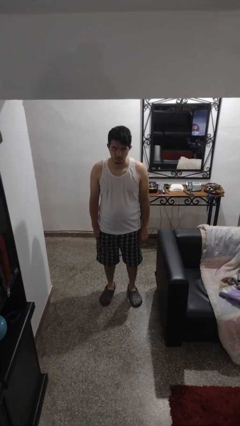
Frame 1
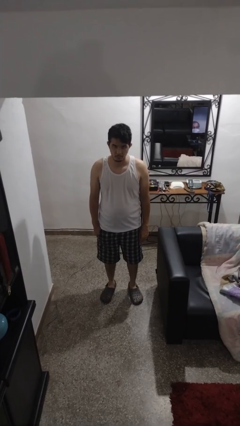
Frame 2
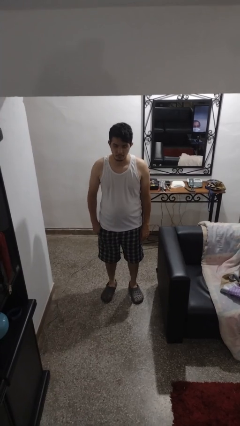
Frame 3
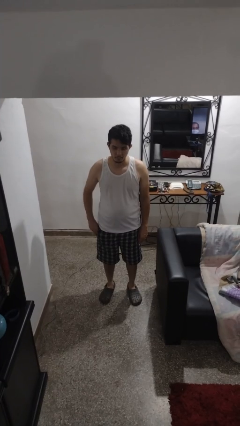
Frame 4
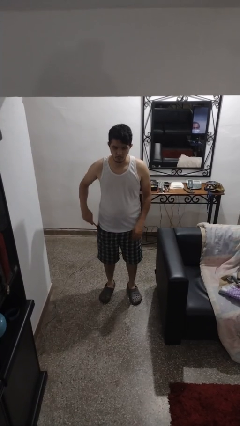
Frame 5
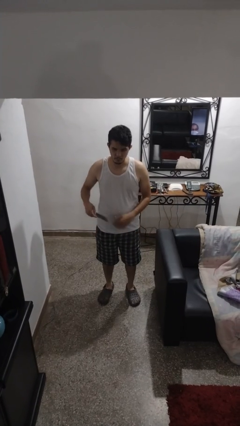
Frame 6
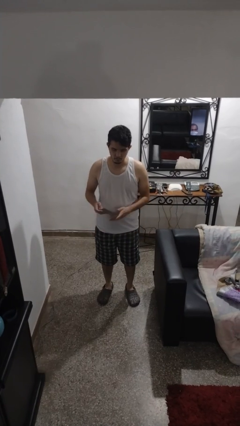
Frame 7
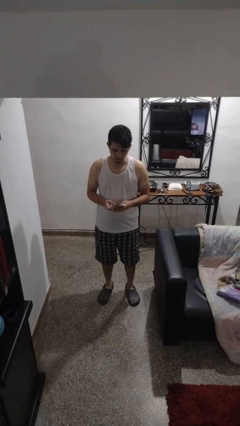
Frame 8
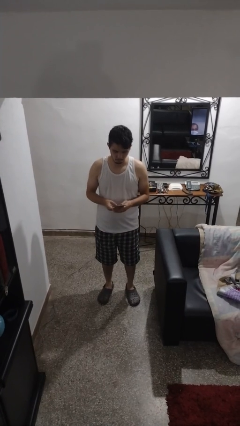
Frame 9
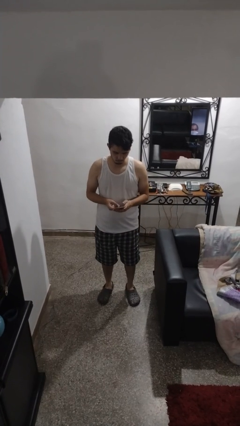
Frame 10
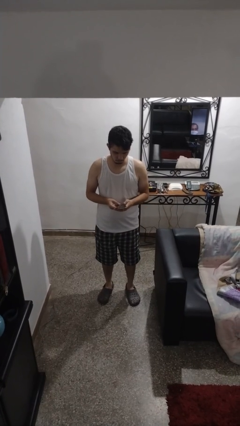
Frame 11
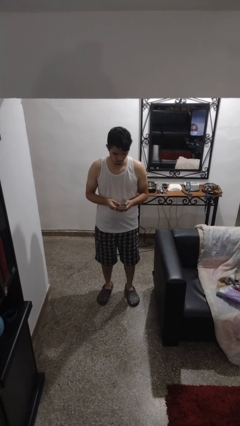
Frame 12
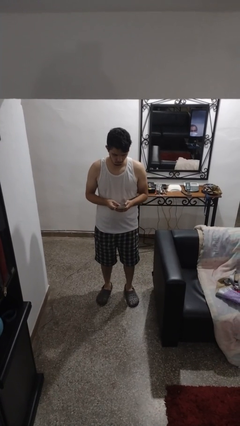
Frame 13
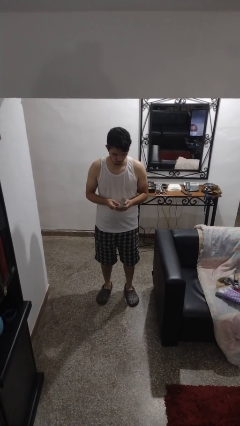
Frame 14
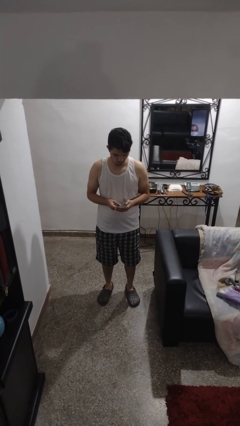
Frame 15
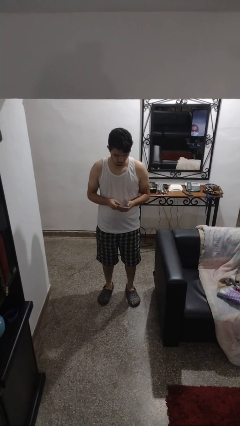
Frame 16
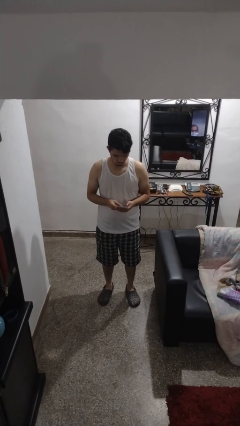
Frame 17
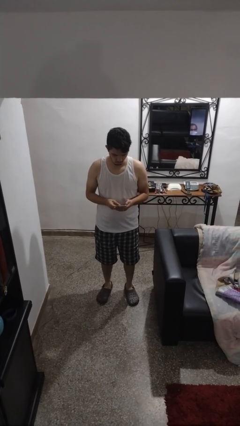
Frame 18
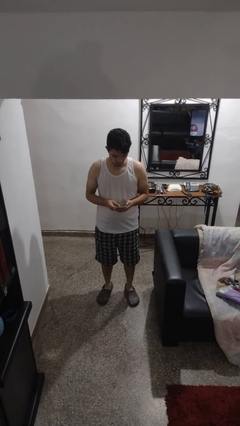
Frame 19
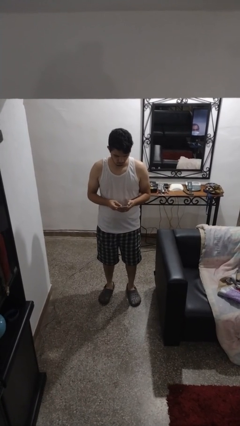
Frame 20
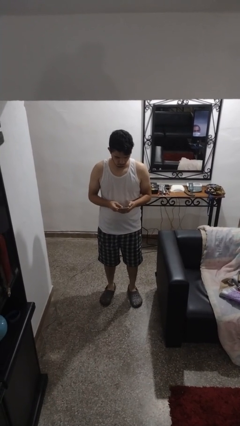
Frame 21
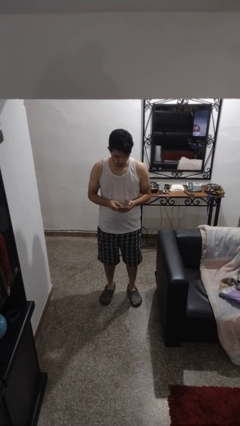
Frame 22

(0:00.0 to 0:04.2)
person takes phone from pocket

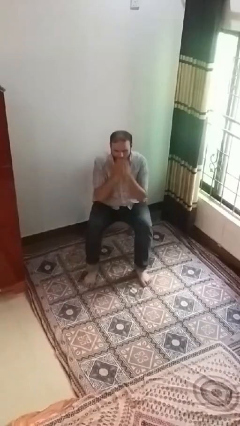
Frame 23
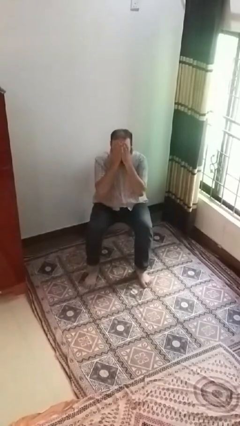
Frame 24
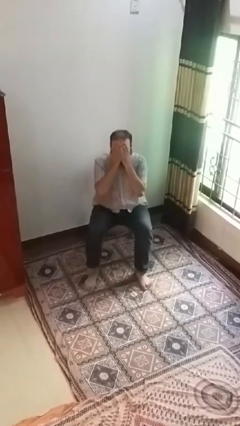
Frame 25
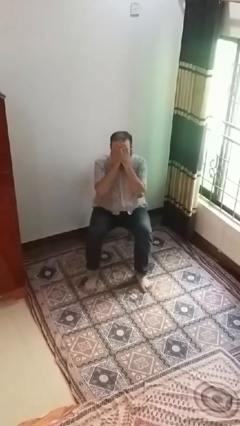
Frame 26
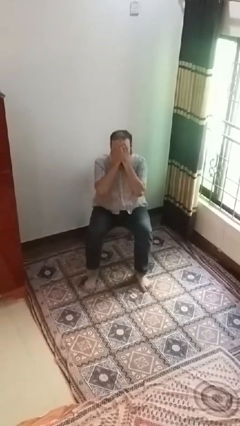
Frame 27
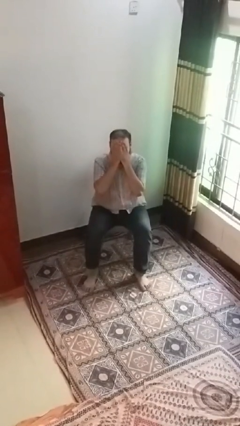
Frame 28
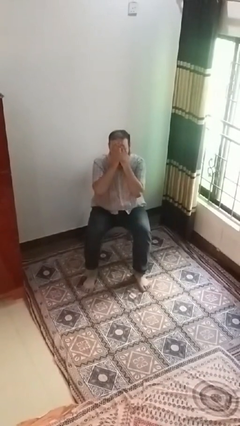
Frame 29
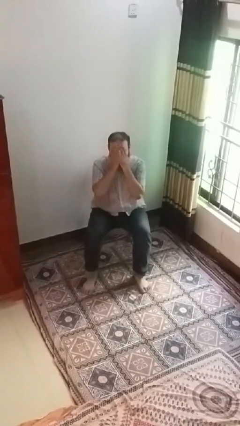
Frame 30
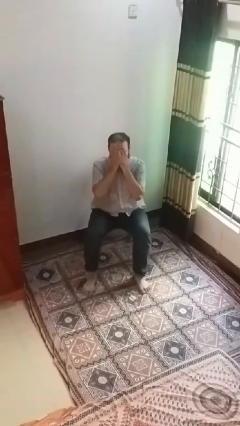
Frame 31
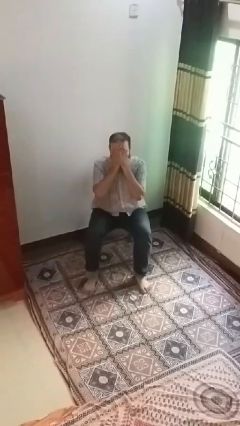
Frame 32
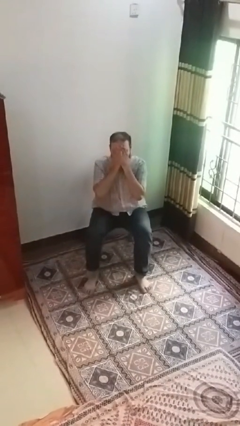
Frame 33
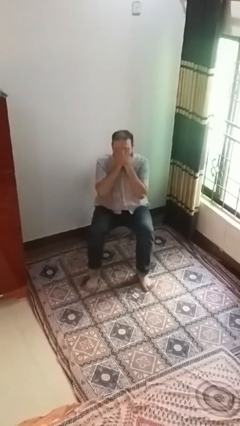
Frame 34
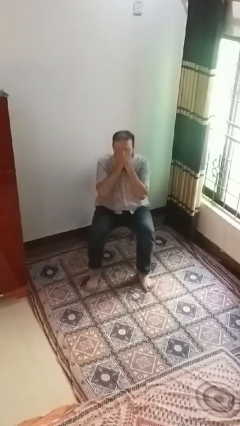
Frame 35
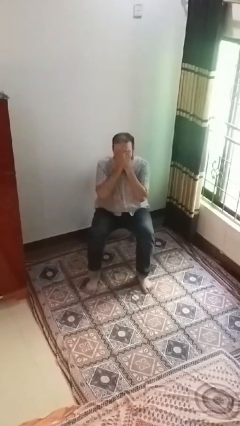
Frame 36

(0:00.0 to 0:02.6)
person covers face with hands

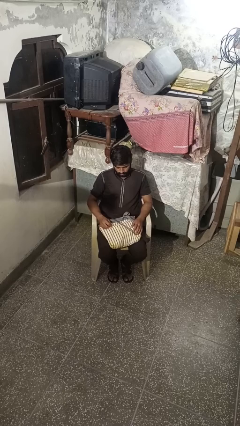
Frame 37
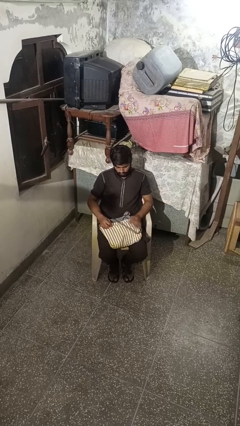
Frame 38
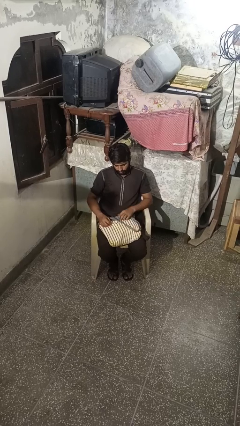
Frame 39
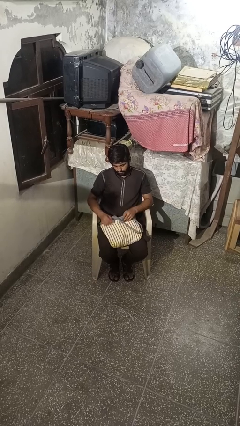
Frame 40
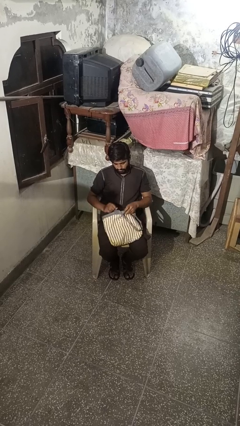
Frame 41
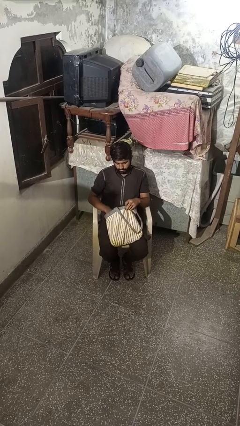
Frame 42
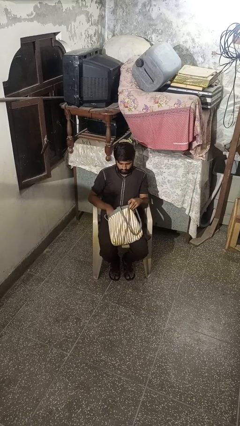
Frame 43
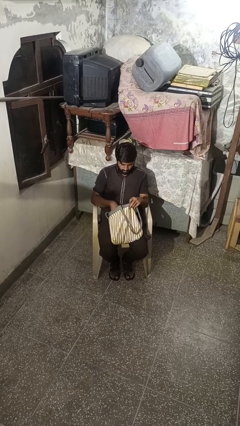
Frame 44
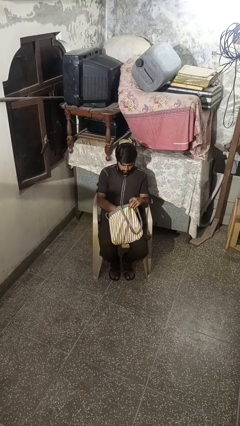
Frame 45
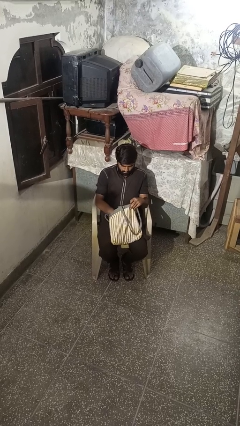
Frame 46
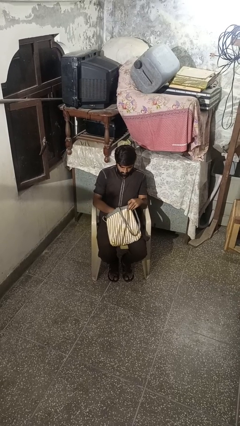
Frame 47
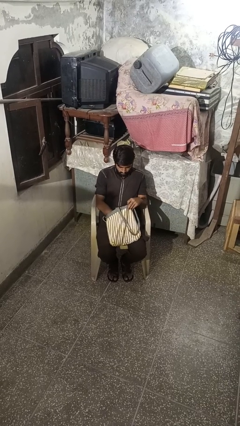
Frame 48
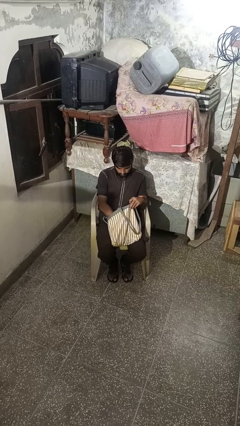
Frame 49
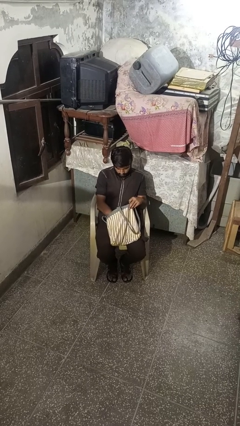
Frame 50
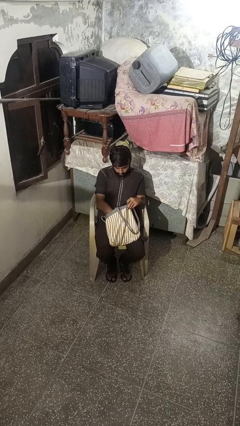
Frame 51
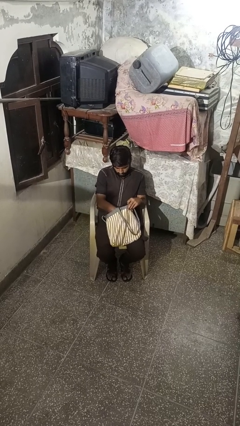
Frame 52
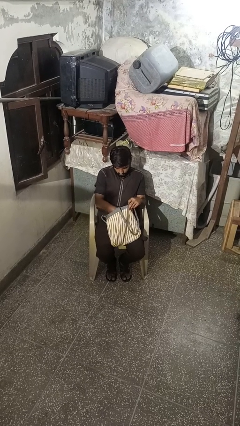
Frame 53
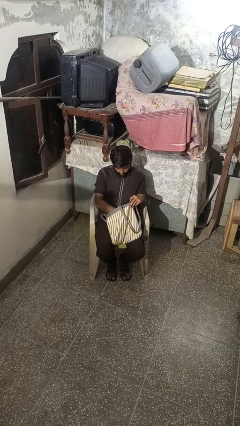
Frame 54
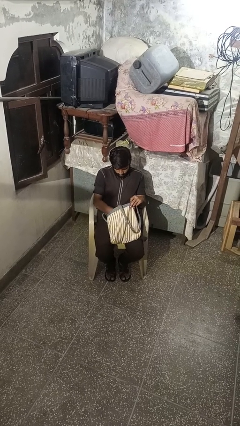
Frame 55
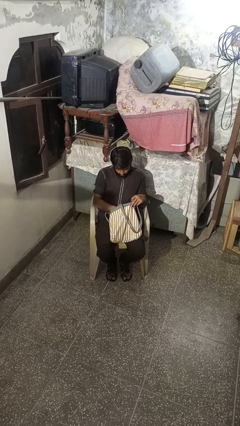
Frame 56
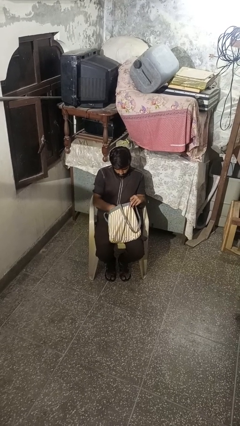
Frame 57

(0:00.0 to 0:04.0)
person searches in backpack

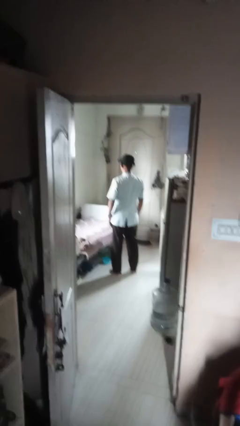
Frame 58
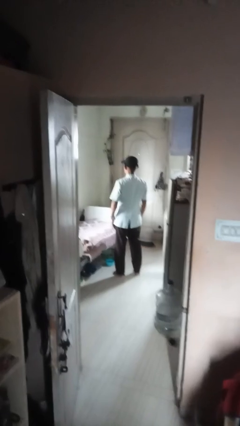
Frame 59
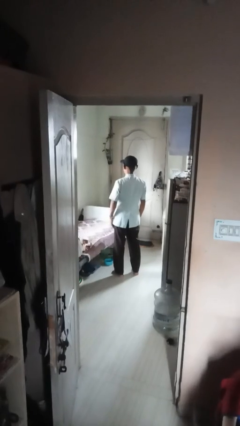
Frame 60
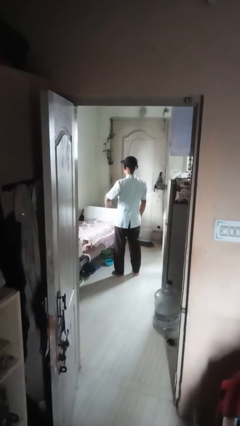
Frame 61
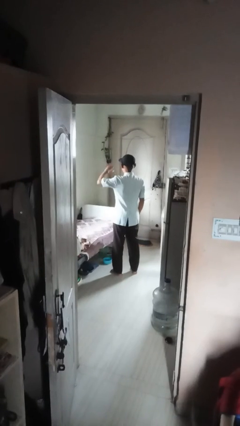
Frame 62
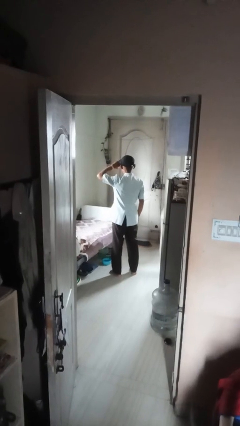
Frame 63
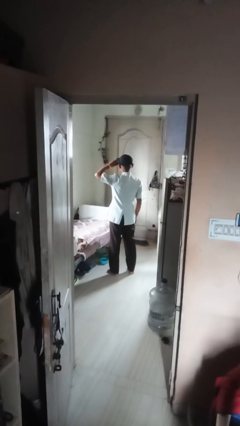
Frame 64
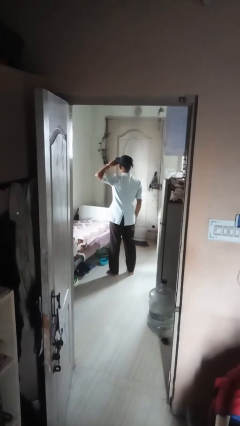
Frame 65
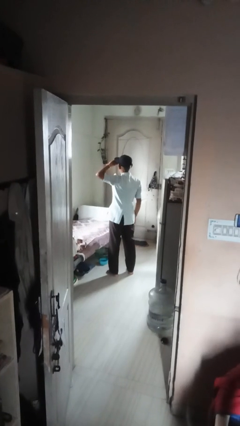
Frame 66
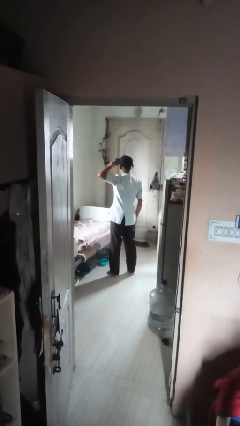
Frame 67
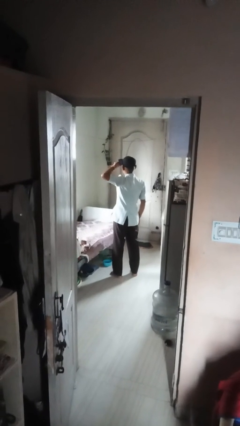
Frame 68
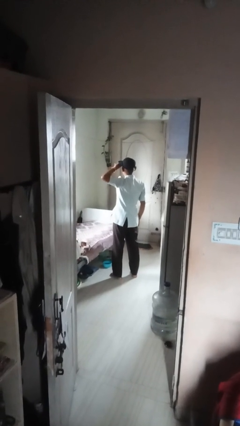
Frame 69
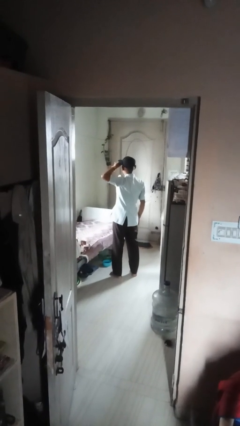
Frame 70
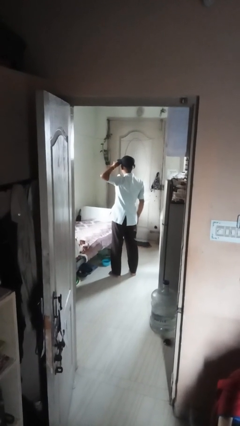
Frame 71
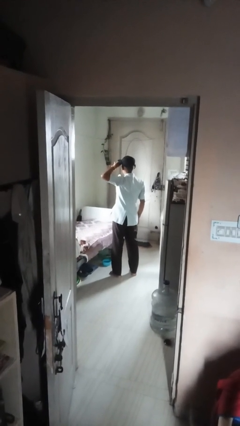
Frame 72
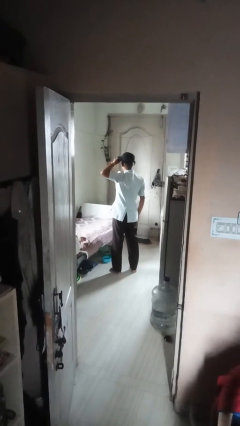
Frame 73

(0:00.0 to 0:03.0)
person salutes

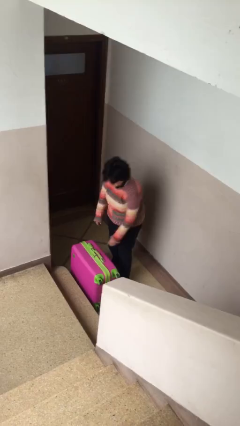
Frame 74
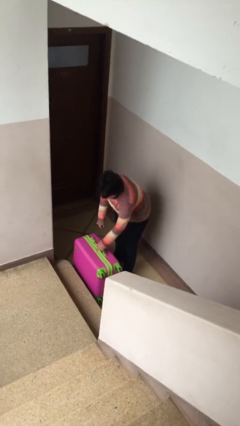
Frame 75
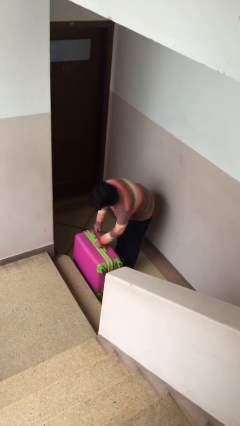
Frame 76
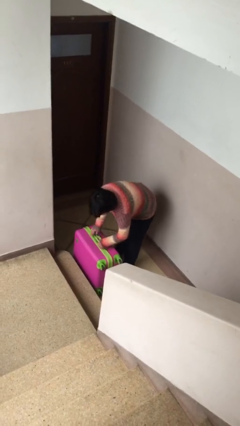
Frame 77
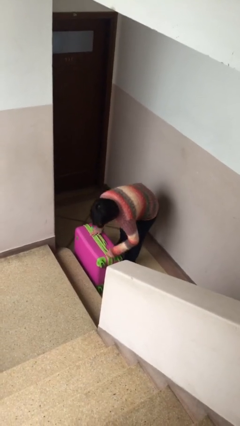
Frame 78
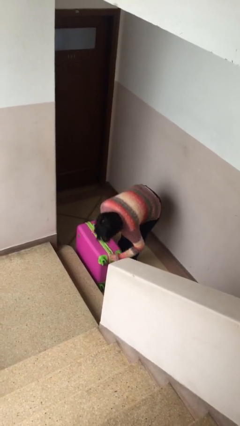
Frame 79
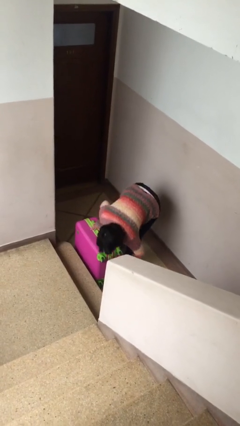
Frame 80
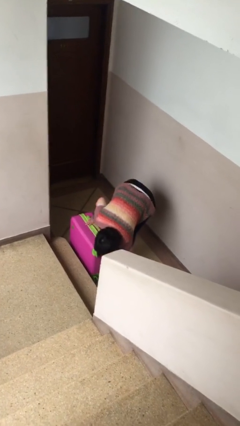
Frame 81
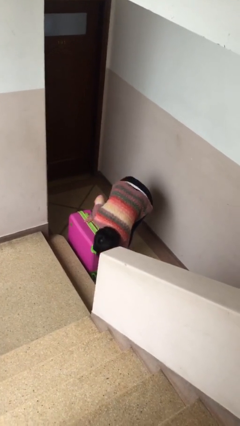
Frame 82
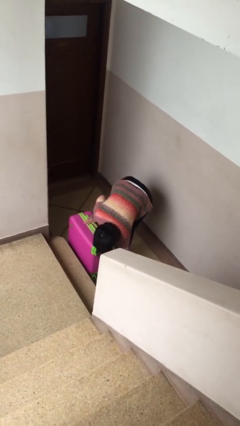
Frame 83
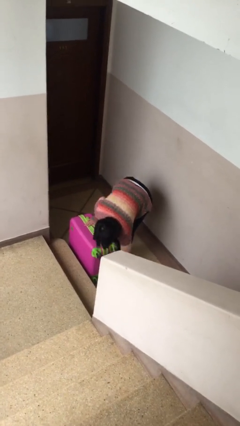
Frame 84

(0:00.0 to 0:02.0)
person opens suitcase

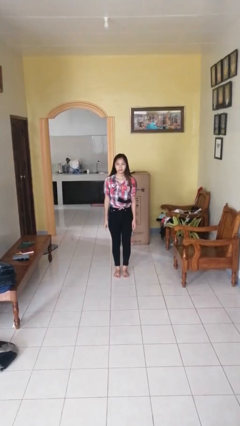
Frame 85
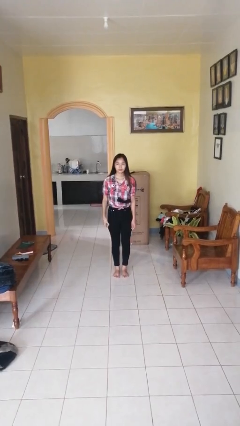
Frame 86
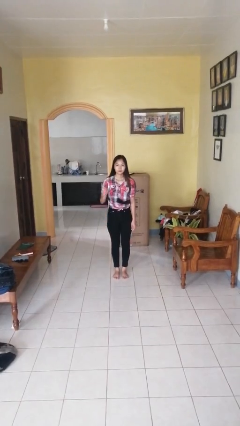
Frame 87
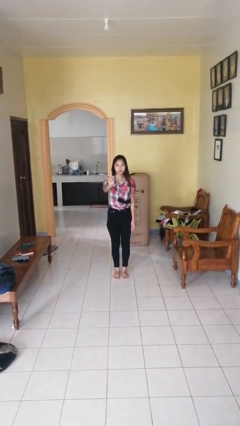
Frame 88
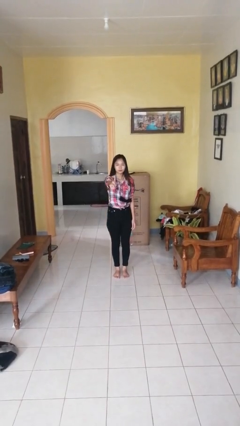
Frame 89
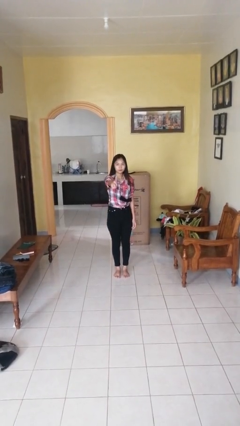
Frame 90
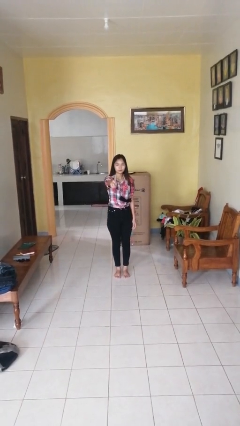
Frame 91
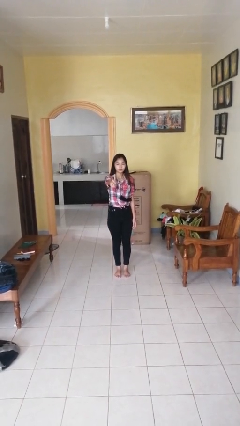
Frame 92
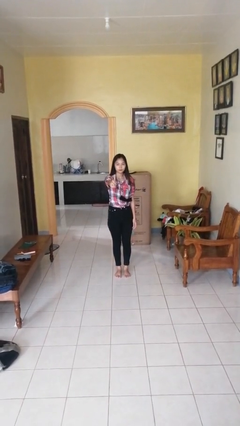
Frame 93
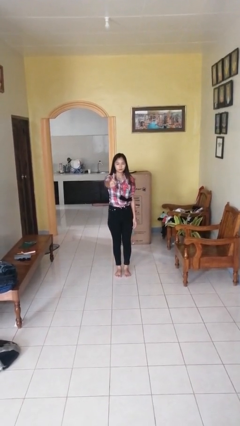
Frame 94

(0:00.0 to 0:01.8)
person gestures number one
